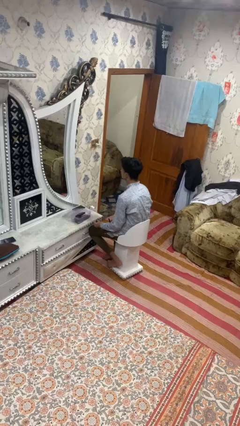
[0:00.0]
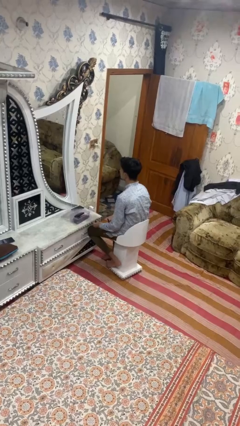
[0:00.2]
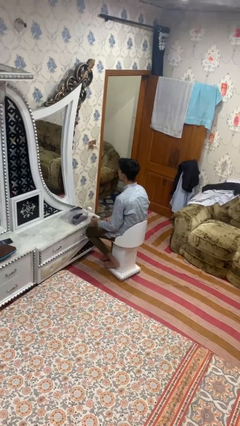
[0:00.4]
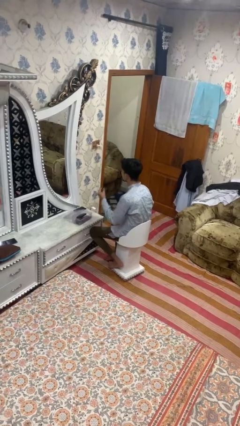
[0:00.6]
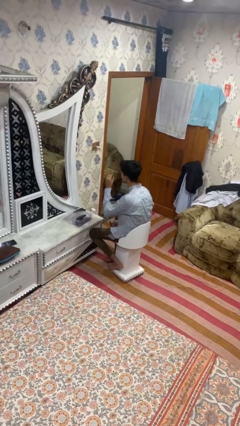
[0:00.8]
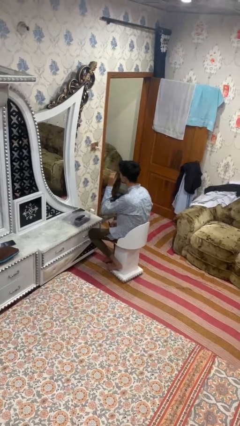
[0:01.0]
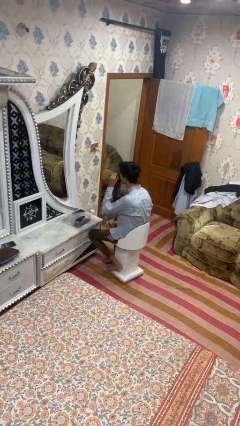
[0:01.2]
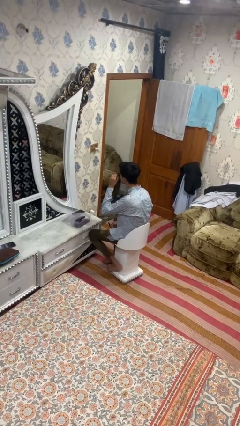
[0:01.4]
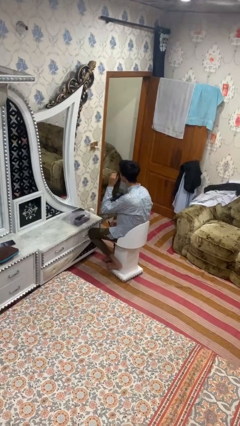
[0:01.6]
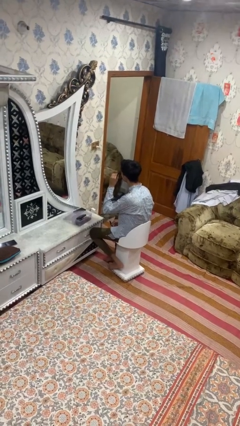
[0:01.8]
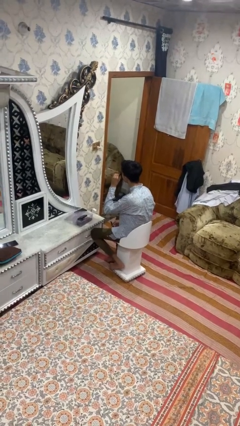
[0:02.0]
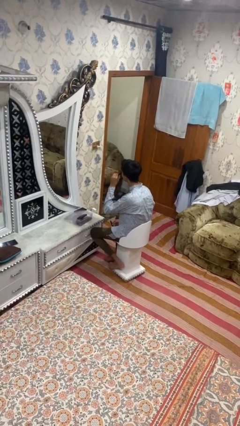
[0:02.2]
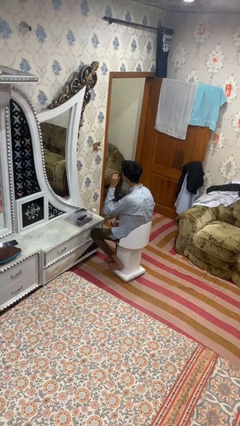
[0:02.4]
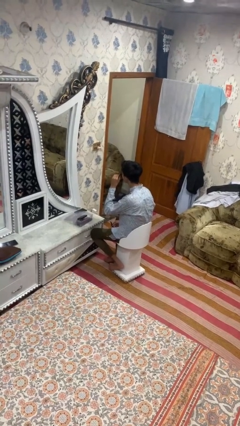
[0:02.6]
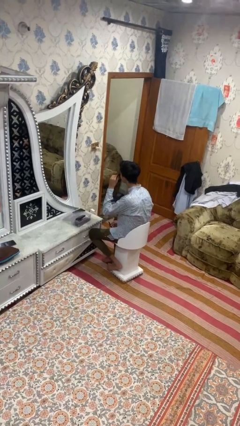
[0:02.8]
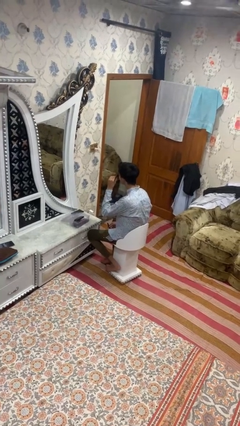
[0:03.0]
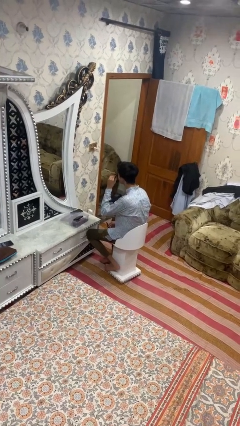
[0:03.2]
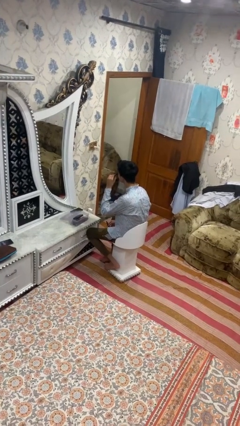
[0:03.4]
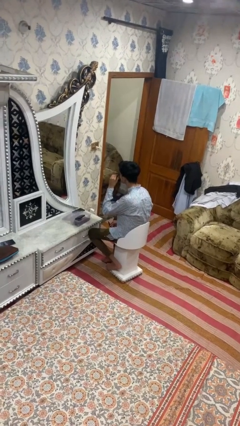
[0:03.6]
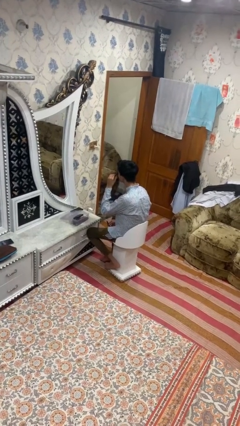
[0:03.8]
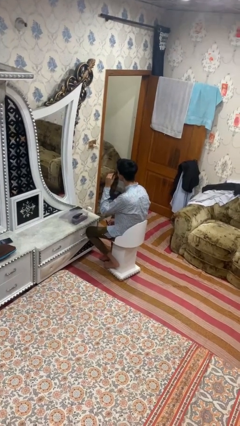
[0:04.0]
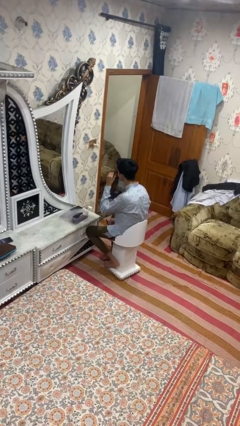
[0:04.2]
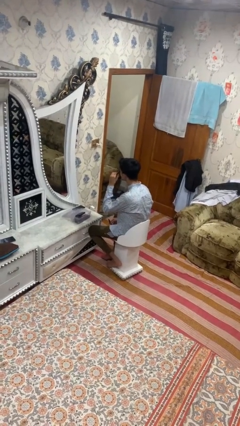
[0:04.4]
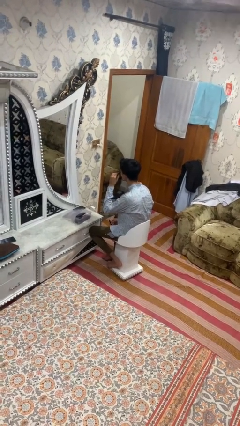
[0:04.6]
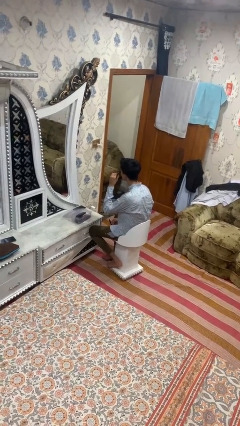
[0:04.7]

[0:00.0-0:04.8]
person applies eye makeup

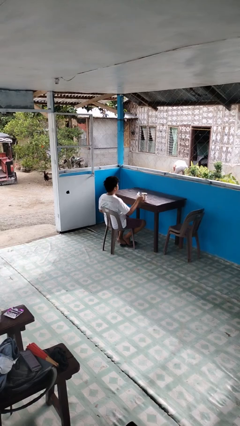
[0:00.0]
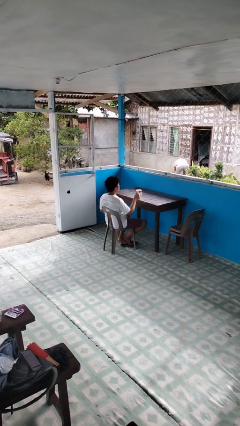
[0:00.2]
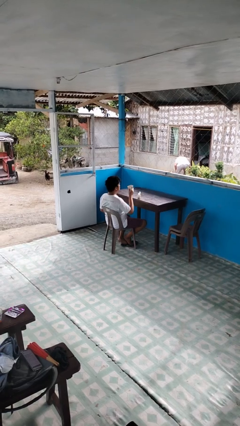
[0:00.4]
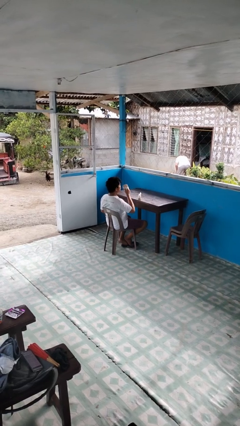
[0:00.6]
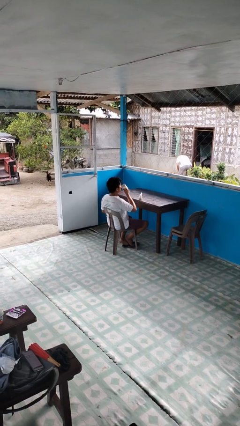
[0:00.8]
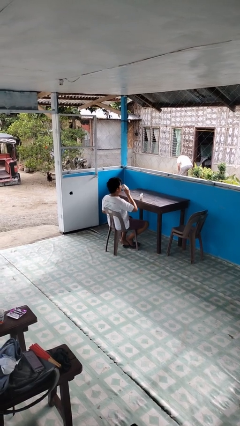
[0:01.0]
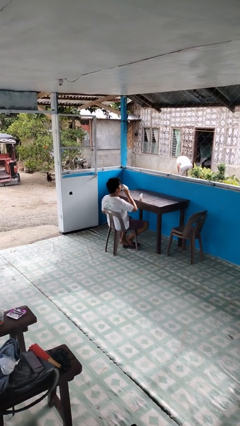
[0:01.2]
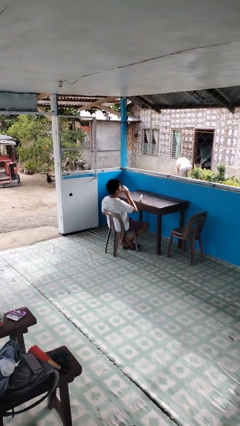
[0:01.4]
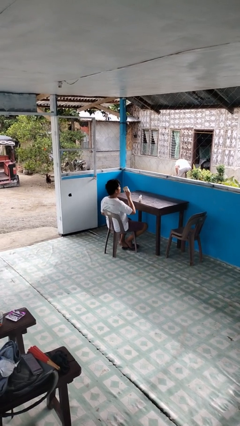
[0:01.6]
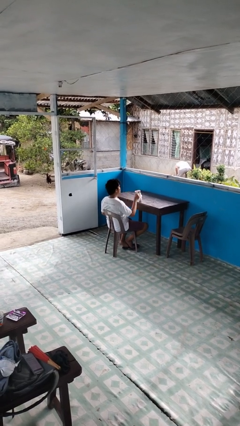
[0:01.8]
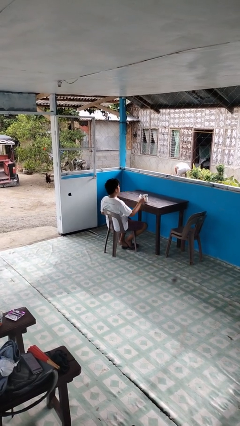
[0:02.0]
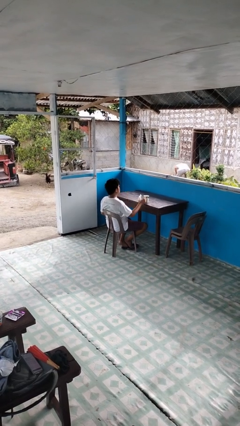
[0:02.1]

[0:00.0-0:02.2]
person drinks from cup

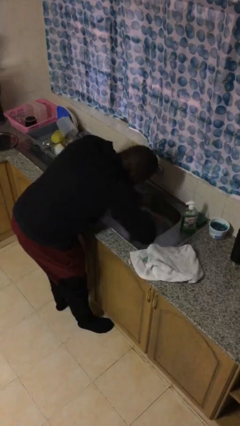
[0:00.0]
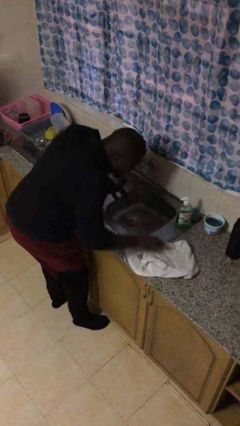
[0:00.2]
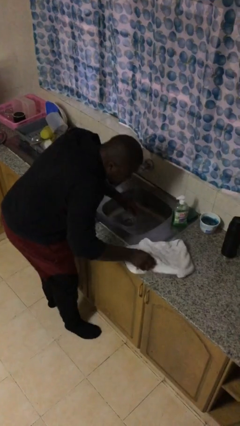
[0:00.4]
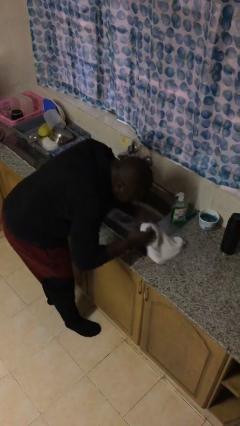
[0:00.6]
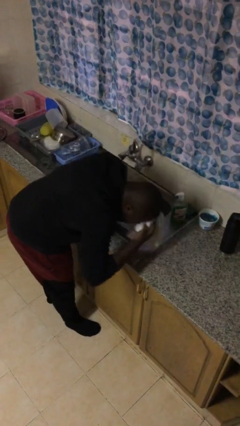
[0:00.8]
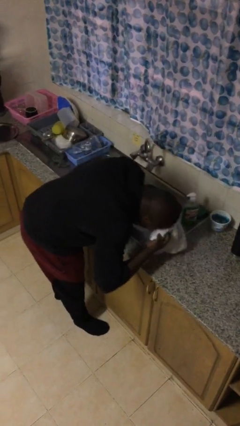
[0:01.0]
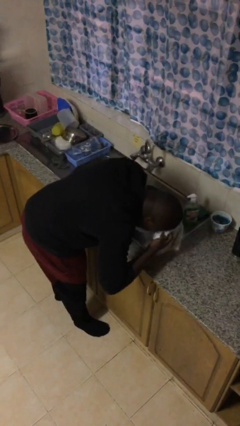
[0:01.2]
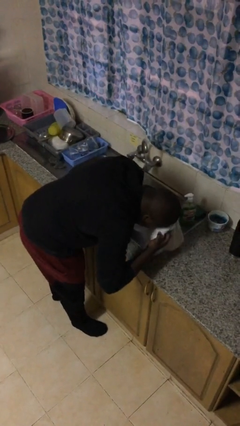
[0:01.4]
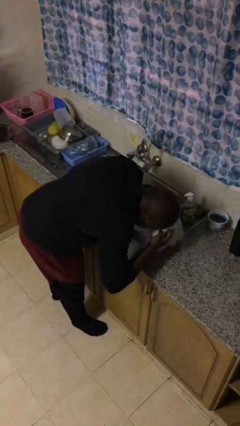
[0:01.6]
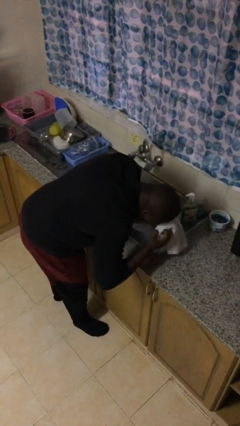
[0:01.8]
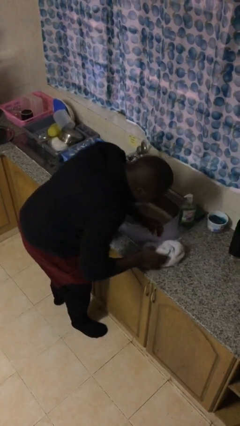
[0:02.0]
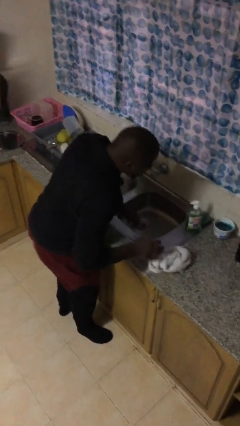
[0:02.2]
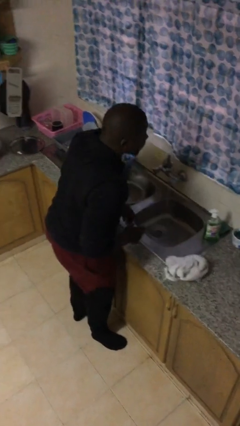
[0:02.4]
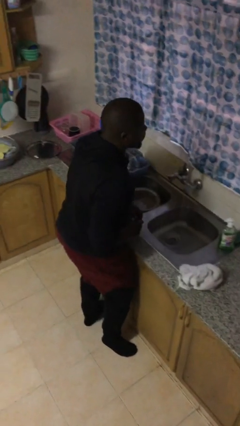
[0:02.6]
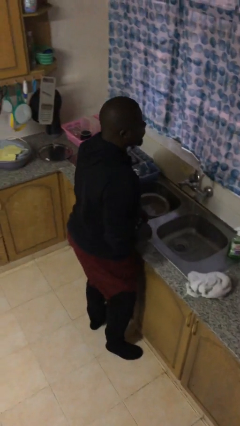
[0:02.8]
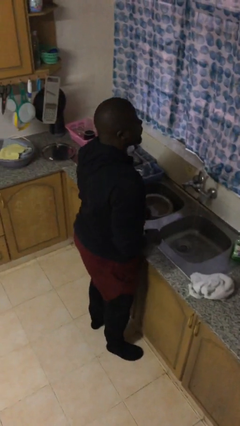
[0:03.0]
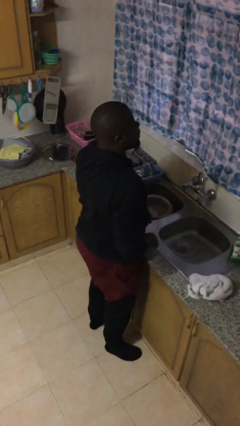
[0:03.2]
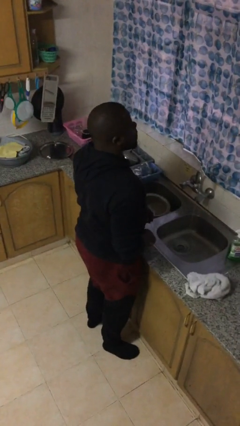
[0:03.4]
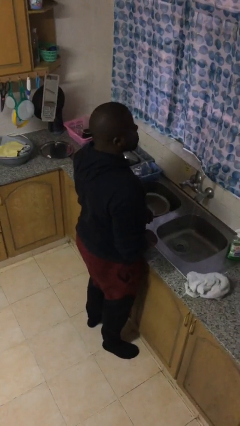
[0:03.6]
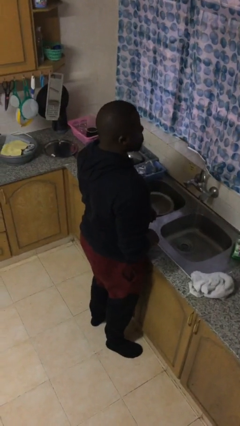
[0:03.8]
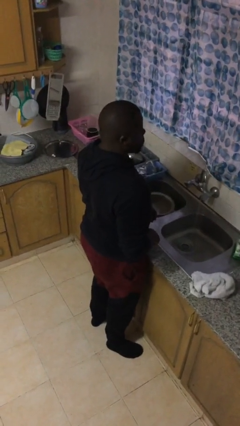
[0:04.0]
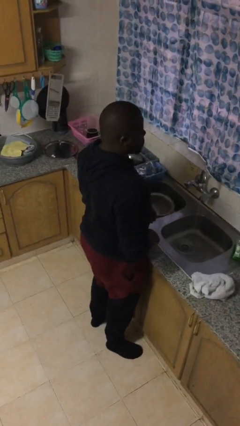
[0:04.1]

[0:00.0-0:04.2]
person dries face with towel

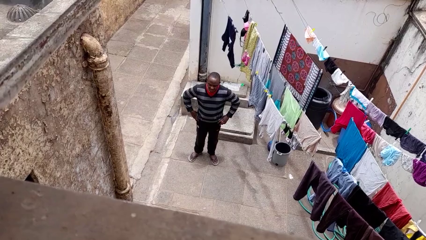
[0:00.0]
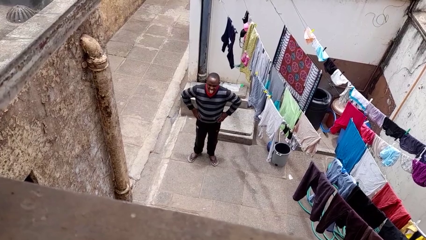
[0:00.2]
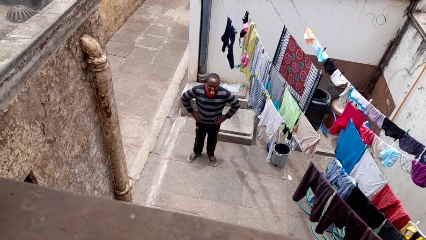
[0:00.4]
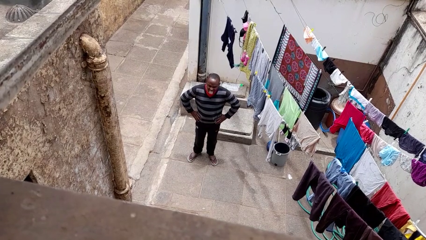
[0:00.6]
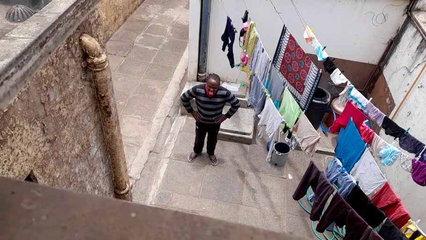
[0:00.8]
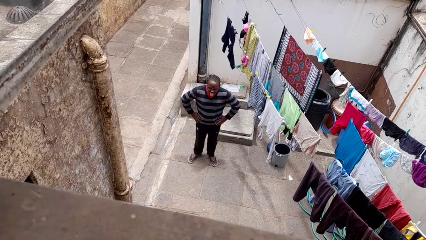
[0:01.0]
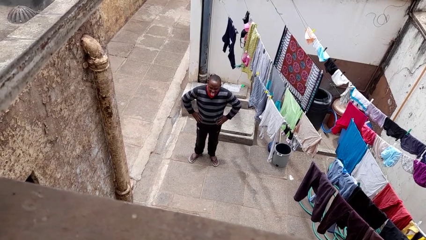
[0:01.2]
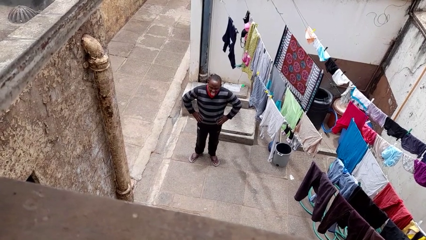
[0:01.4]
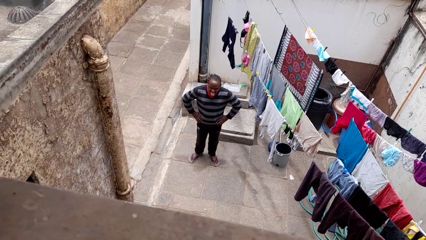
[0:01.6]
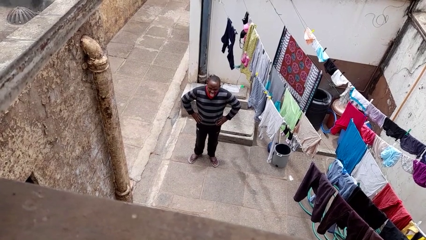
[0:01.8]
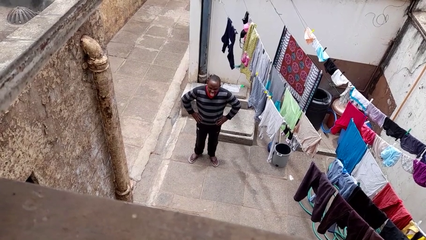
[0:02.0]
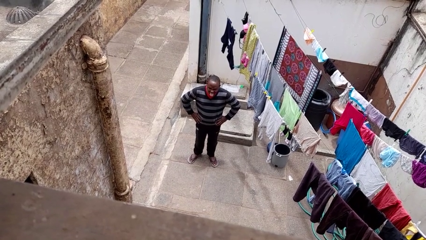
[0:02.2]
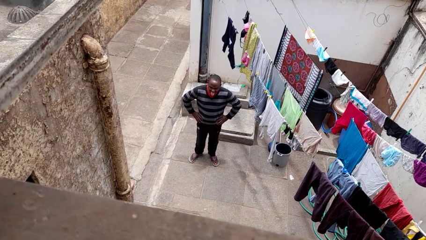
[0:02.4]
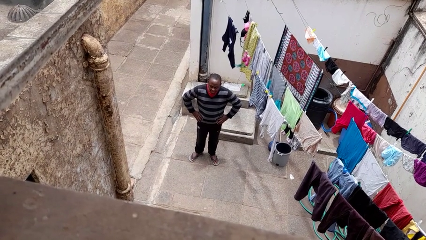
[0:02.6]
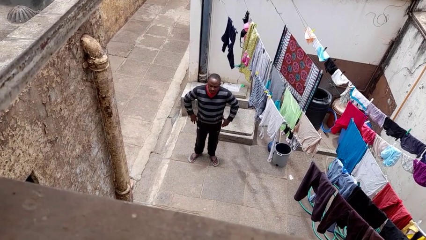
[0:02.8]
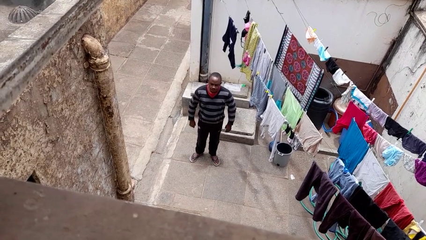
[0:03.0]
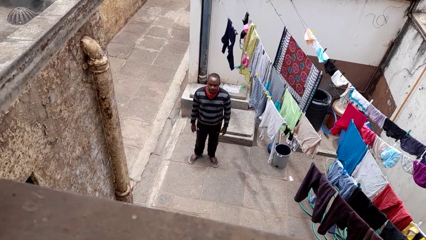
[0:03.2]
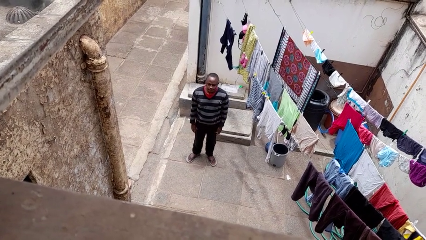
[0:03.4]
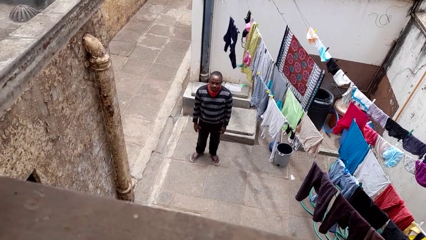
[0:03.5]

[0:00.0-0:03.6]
person sticks out tongue

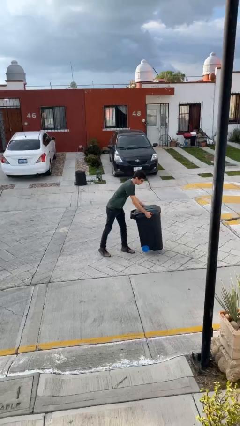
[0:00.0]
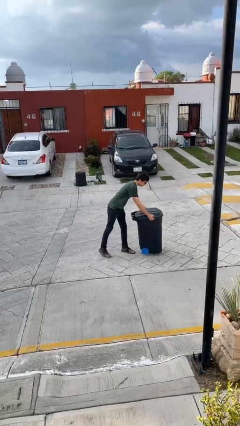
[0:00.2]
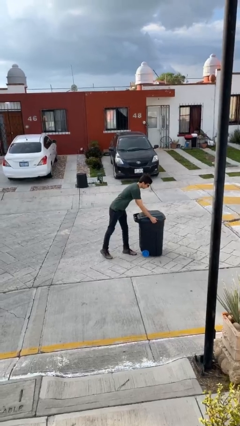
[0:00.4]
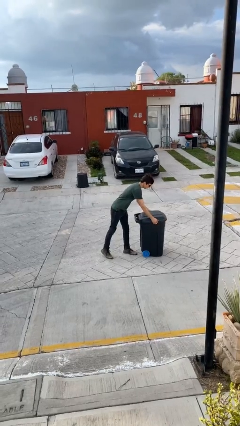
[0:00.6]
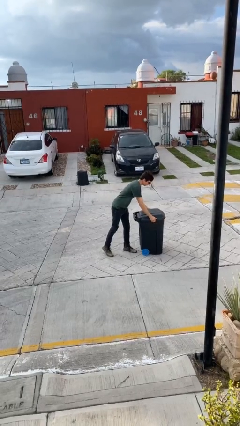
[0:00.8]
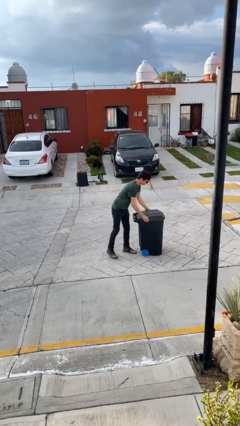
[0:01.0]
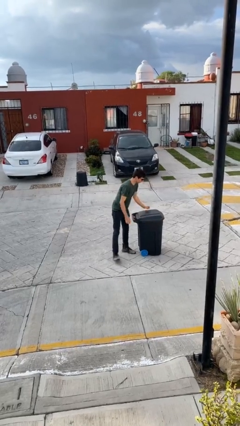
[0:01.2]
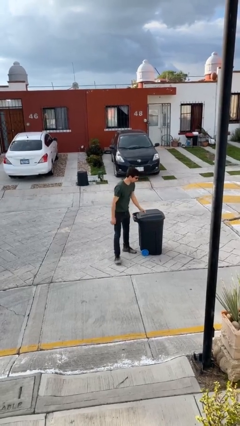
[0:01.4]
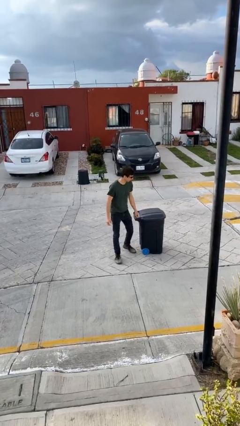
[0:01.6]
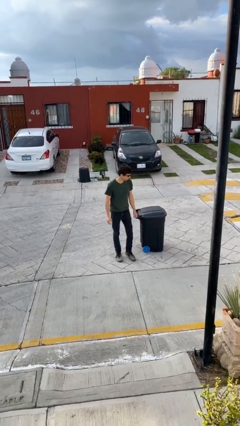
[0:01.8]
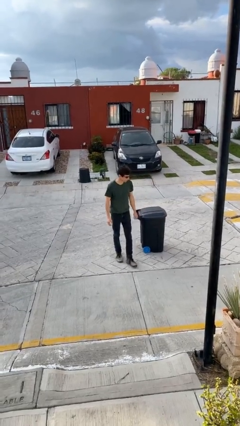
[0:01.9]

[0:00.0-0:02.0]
person puts down object on floor

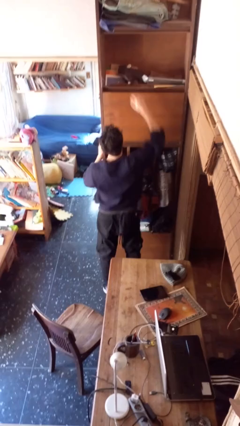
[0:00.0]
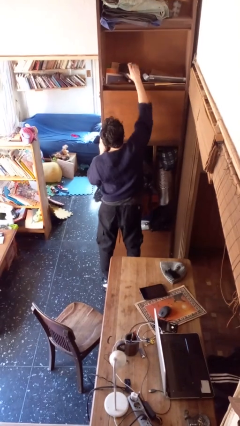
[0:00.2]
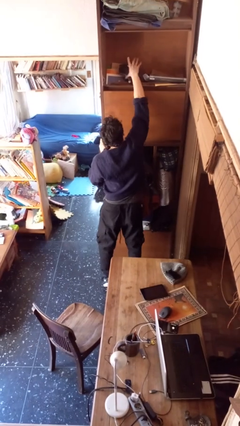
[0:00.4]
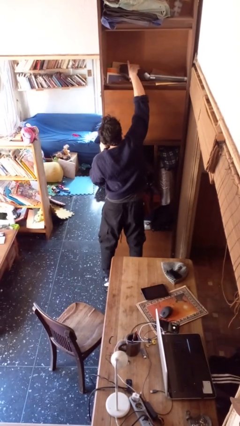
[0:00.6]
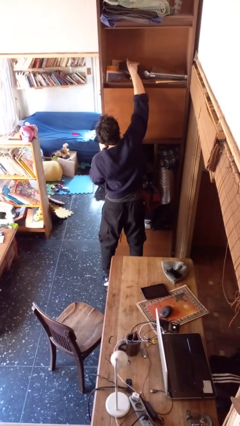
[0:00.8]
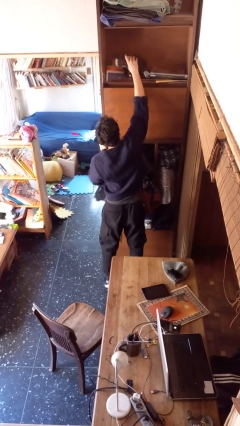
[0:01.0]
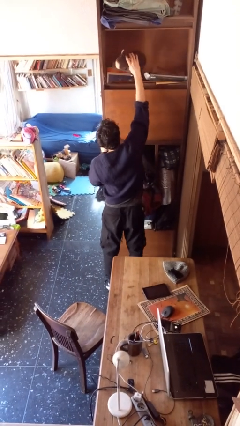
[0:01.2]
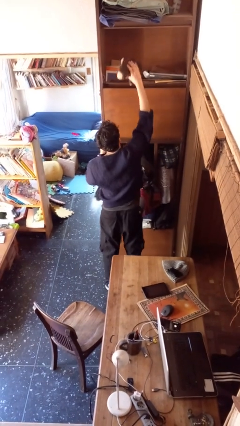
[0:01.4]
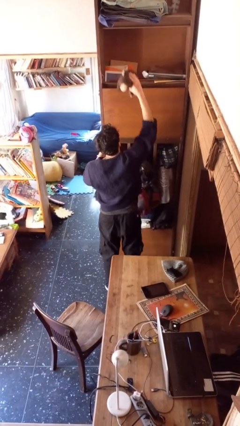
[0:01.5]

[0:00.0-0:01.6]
person picks up object from shelf
